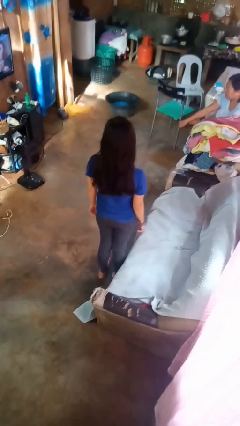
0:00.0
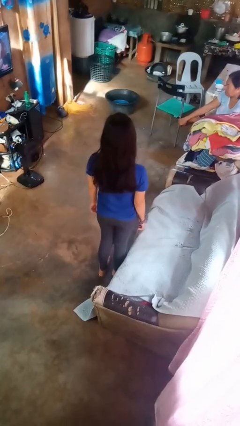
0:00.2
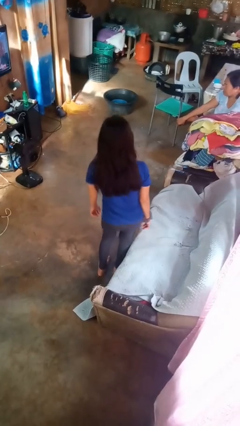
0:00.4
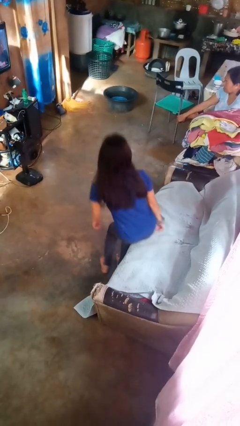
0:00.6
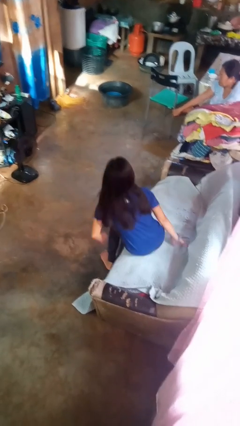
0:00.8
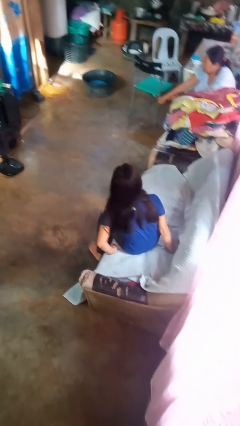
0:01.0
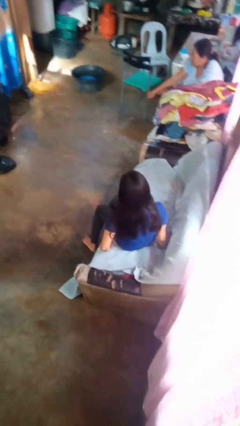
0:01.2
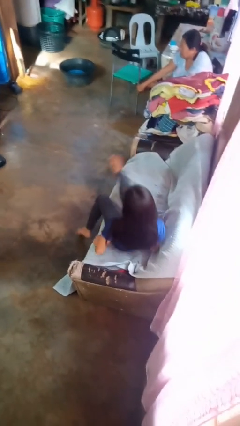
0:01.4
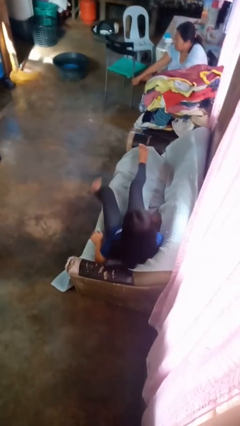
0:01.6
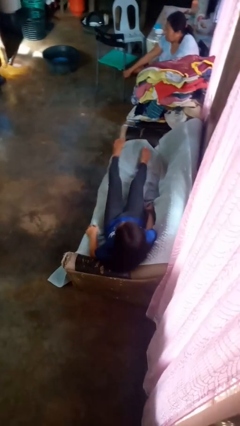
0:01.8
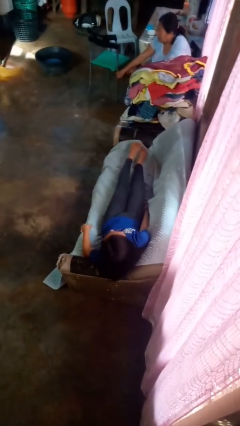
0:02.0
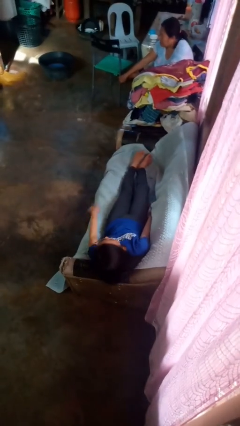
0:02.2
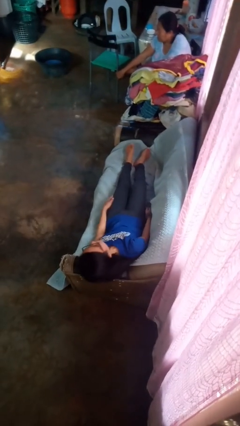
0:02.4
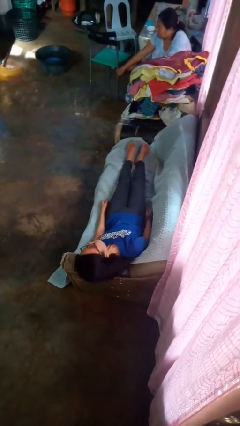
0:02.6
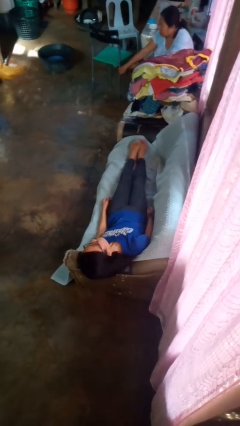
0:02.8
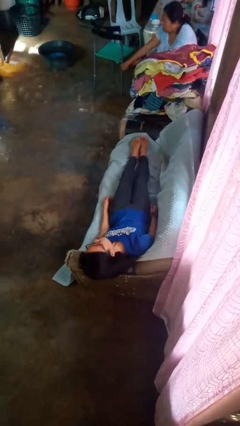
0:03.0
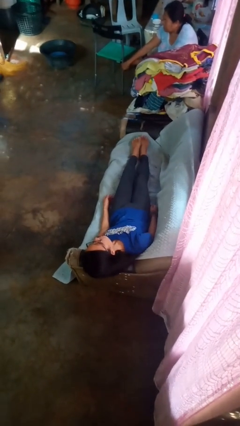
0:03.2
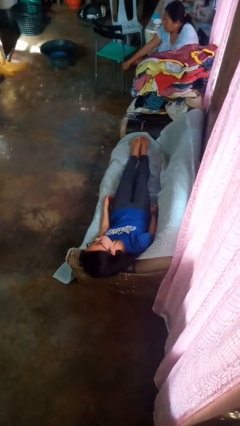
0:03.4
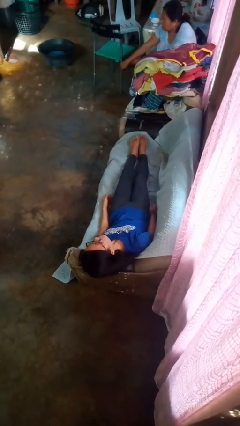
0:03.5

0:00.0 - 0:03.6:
person lies down on couch

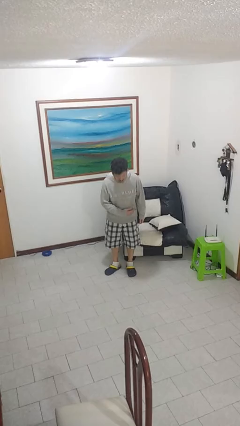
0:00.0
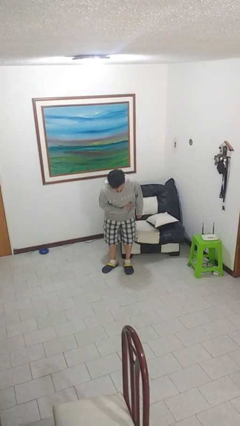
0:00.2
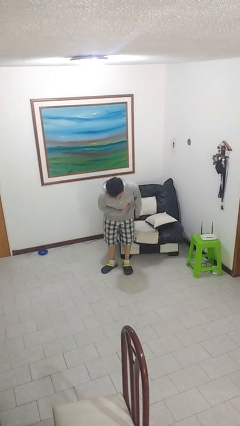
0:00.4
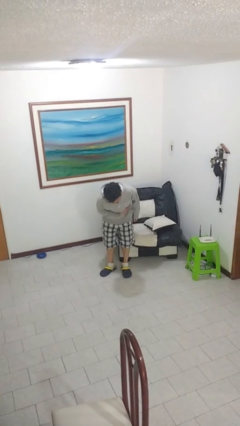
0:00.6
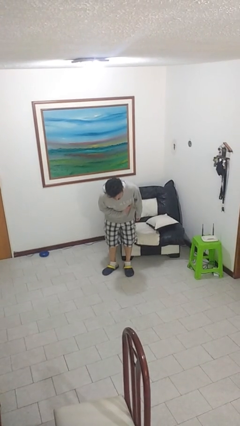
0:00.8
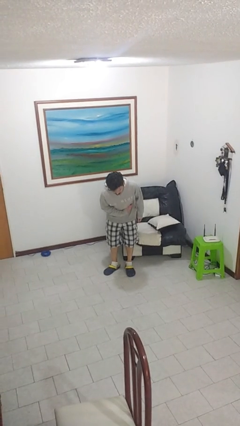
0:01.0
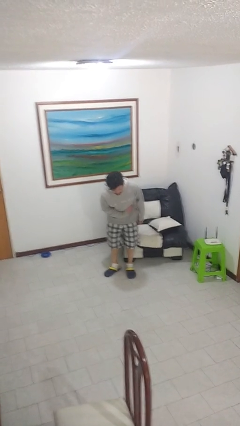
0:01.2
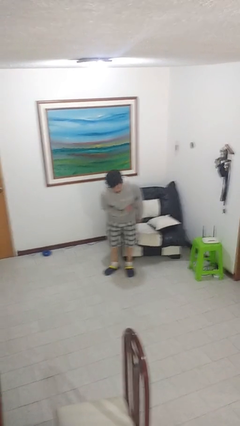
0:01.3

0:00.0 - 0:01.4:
person bows

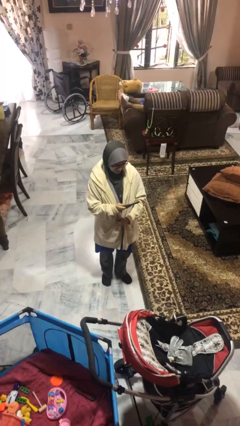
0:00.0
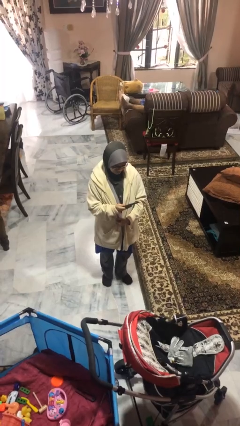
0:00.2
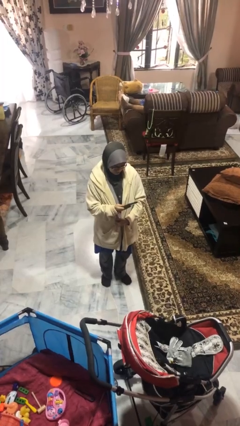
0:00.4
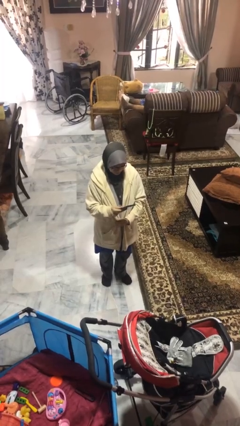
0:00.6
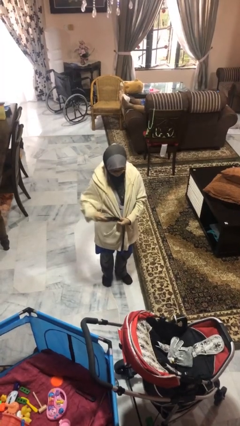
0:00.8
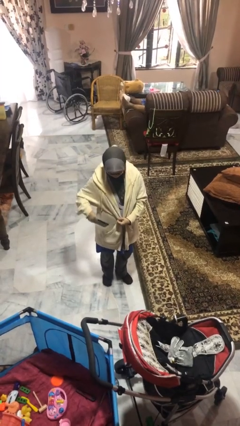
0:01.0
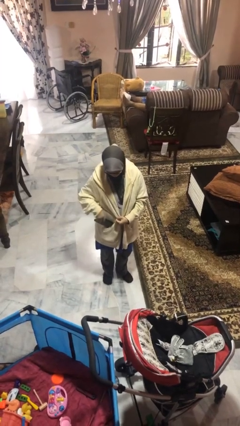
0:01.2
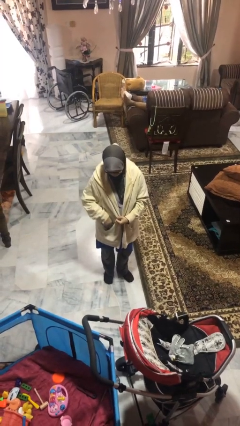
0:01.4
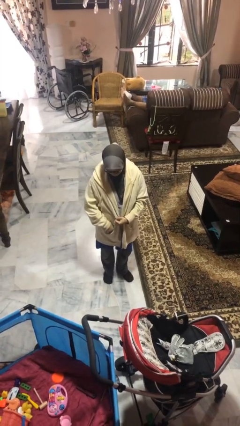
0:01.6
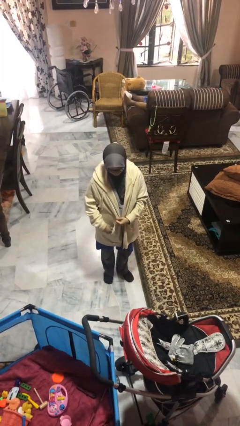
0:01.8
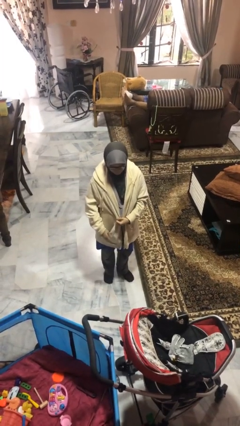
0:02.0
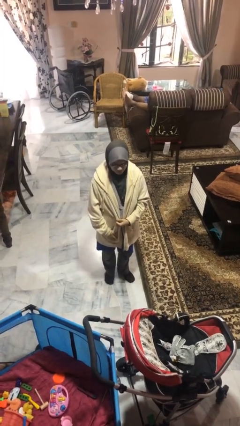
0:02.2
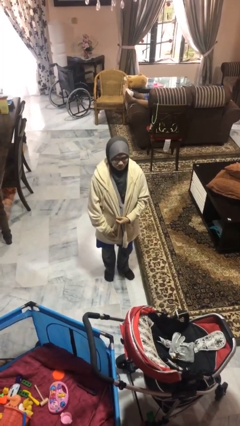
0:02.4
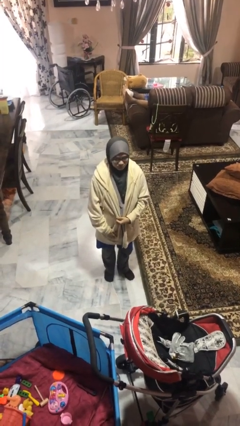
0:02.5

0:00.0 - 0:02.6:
person puts phone into pocket

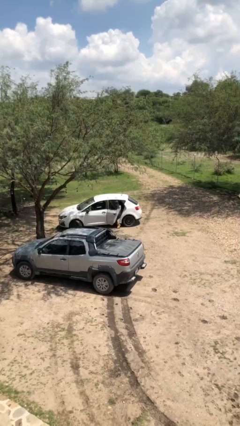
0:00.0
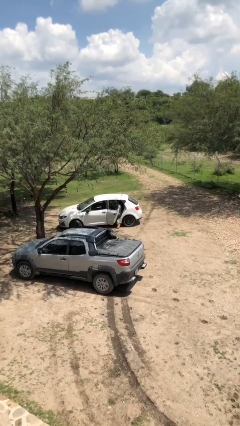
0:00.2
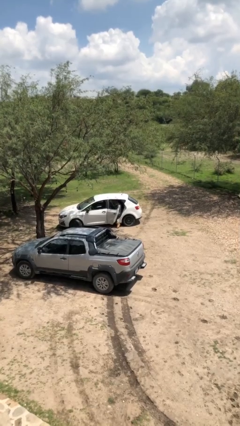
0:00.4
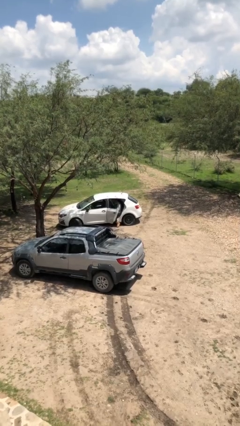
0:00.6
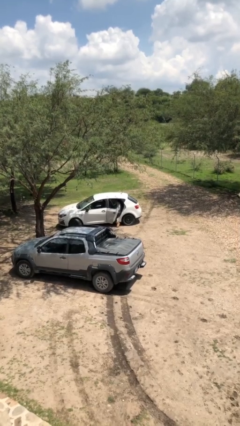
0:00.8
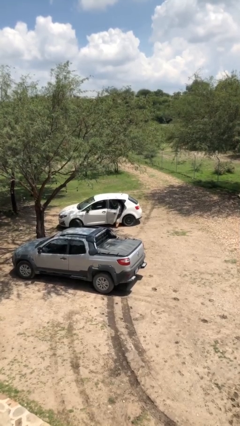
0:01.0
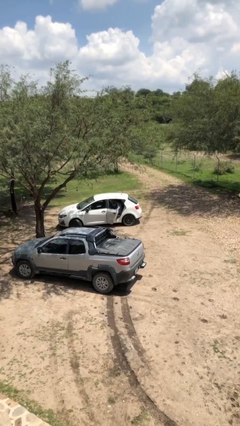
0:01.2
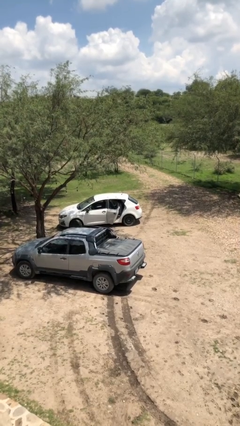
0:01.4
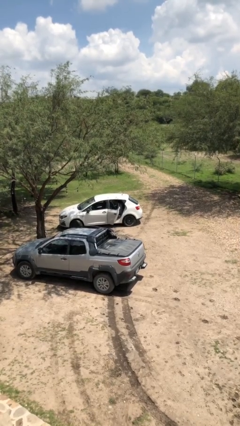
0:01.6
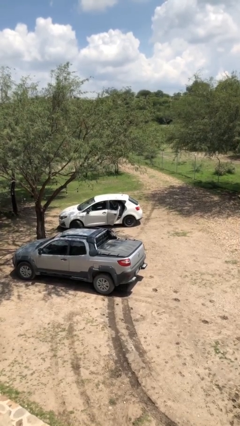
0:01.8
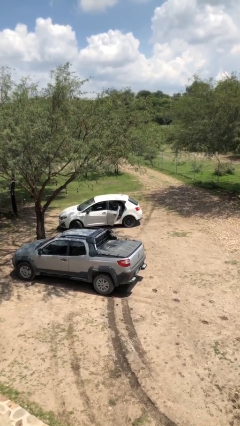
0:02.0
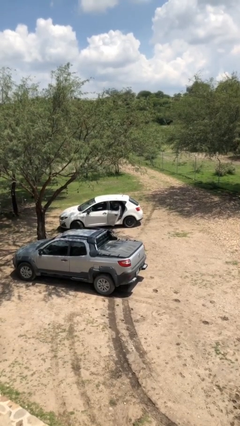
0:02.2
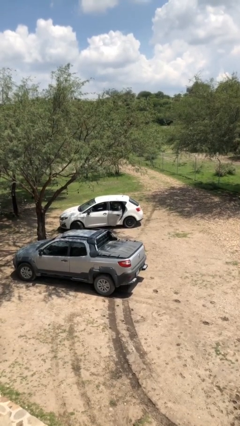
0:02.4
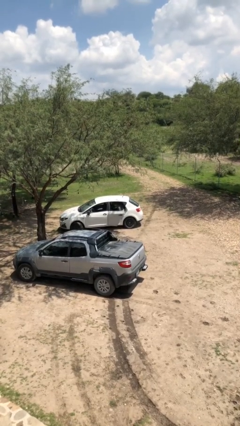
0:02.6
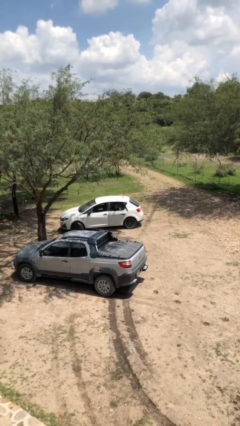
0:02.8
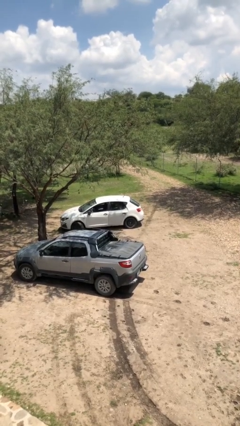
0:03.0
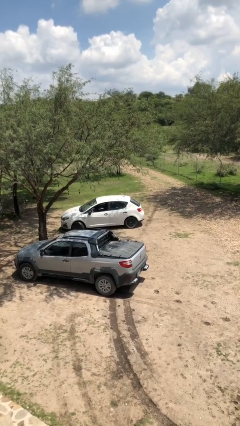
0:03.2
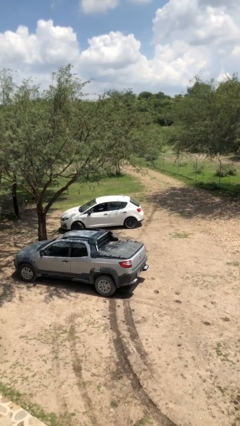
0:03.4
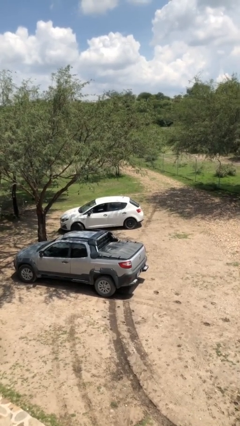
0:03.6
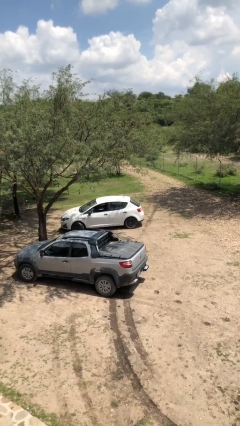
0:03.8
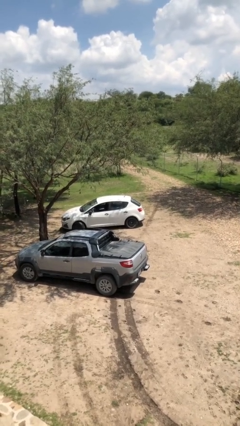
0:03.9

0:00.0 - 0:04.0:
person closes car door

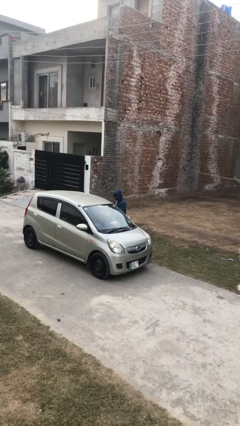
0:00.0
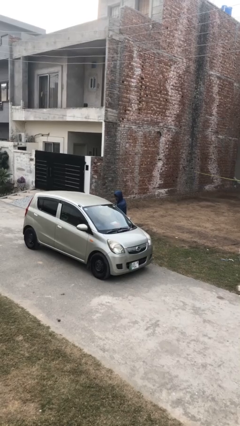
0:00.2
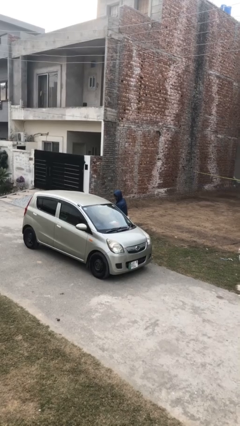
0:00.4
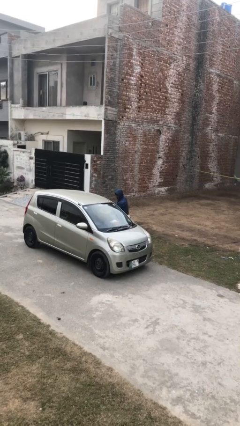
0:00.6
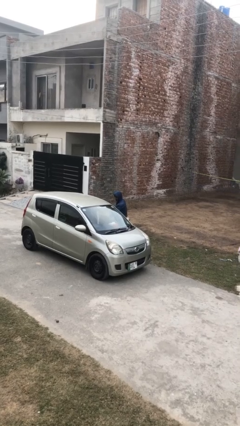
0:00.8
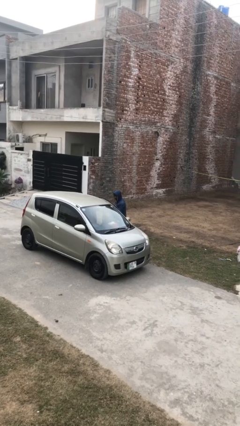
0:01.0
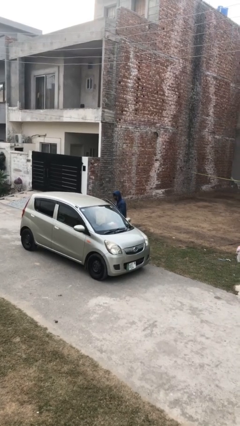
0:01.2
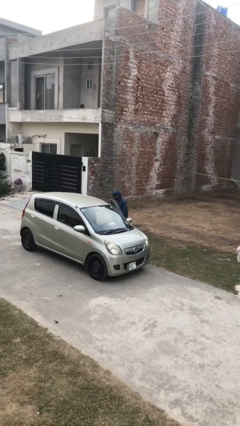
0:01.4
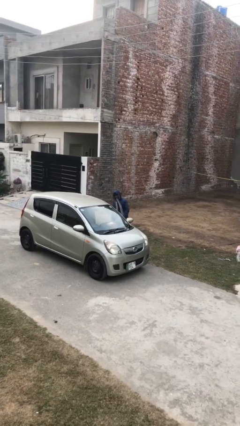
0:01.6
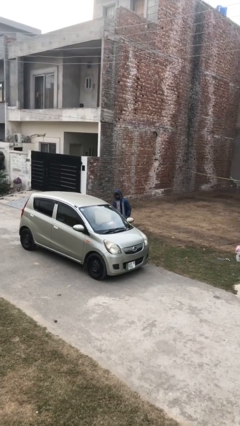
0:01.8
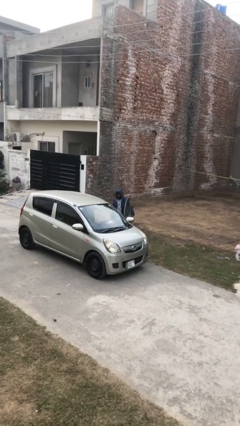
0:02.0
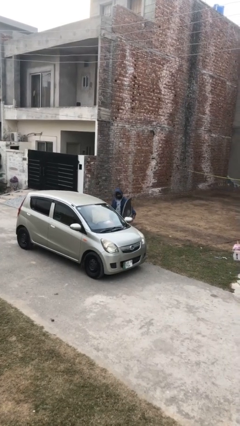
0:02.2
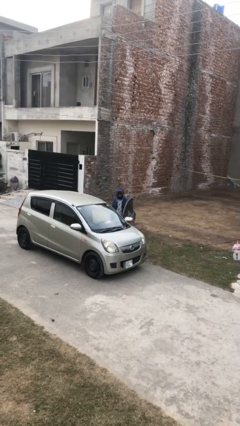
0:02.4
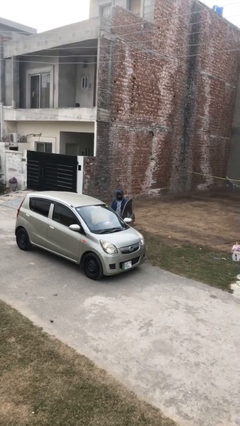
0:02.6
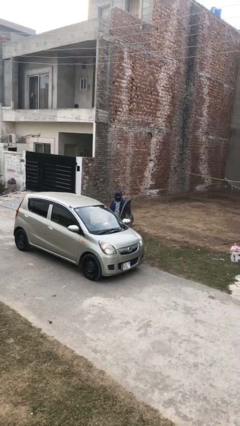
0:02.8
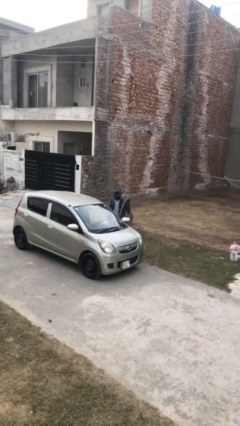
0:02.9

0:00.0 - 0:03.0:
person opens car door

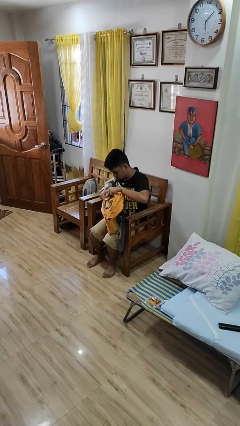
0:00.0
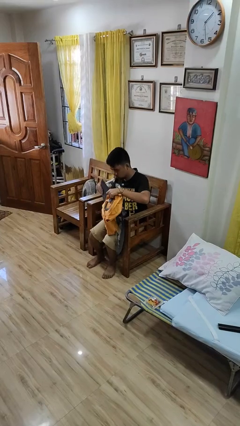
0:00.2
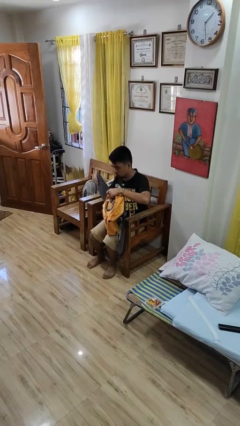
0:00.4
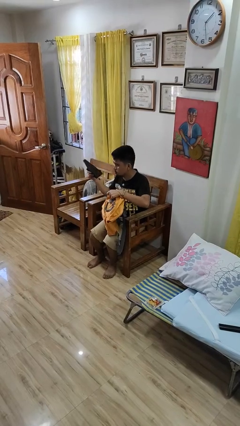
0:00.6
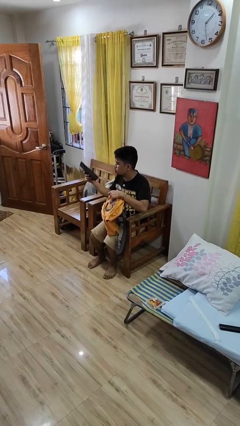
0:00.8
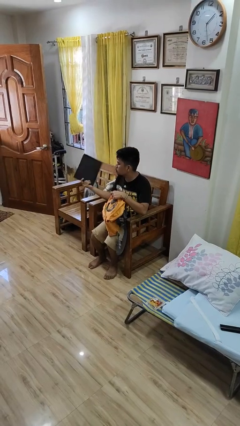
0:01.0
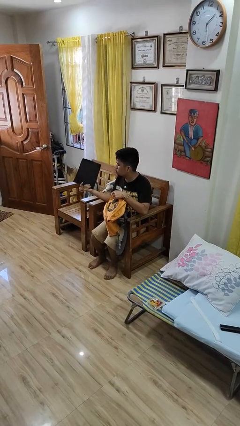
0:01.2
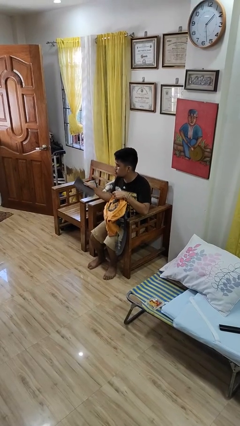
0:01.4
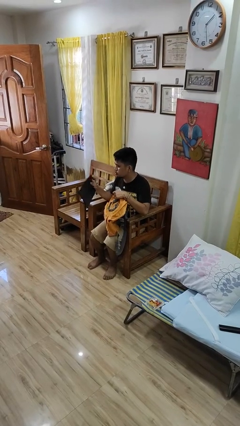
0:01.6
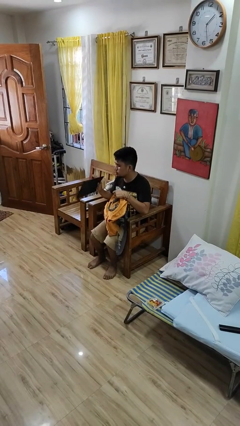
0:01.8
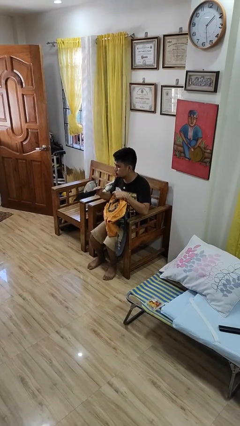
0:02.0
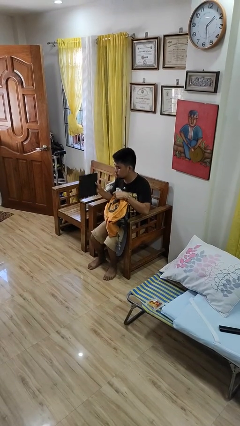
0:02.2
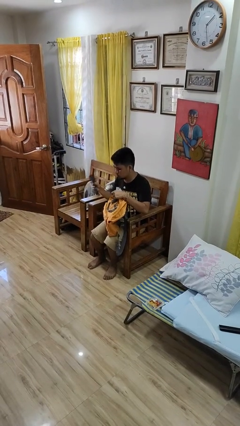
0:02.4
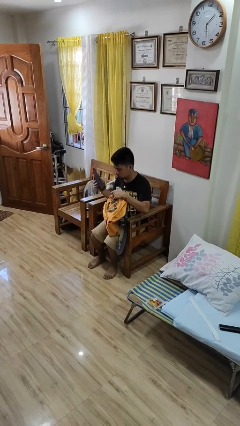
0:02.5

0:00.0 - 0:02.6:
person takes object from backpack

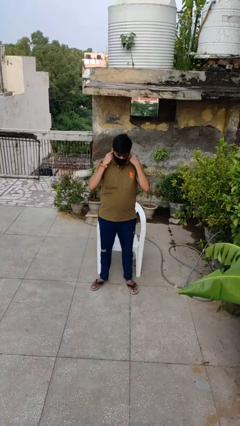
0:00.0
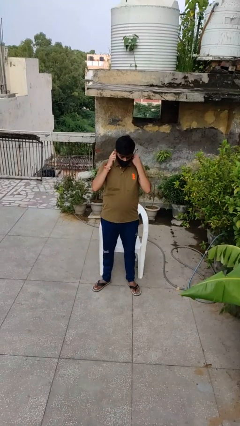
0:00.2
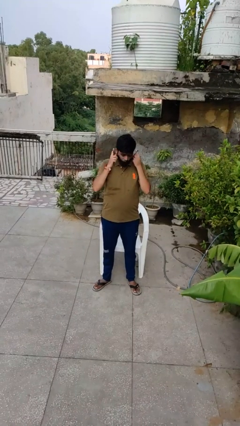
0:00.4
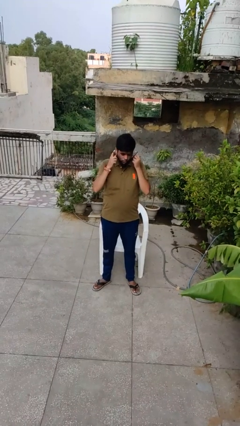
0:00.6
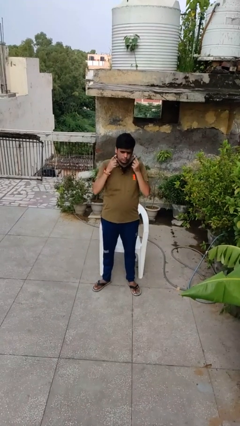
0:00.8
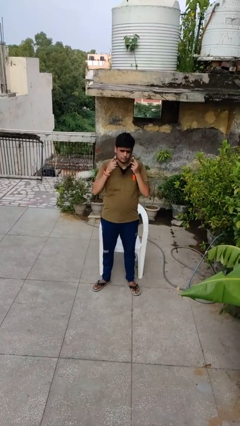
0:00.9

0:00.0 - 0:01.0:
person takes off facemask
